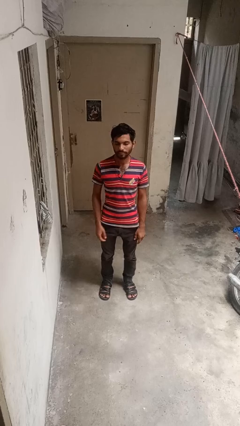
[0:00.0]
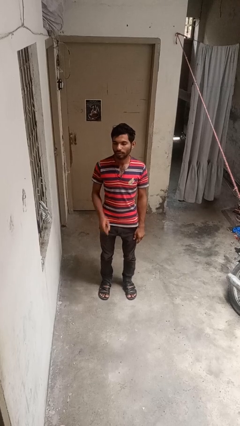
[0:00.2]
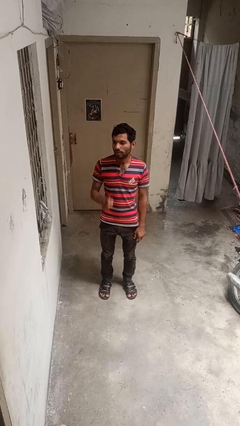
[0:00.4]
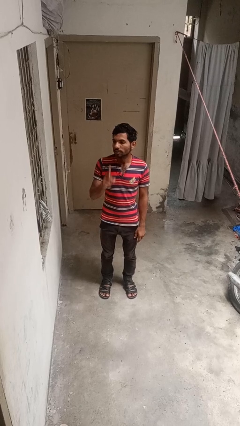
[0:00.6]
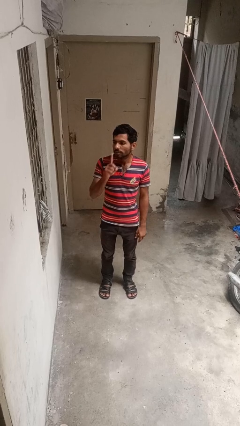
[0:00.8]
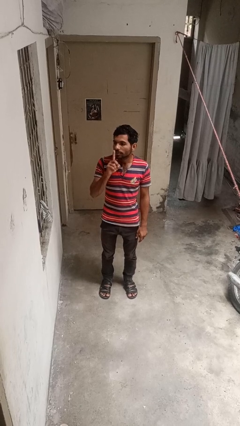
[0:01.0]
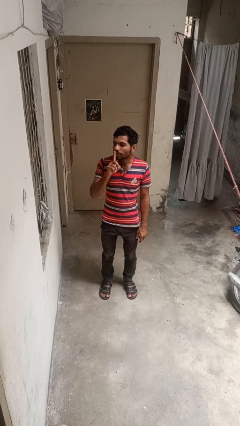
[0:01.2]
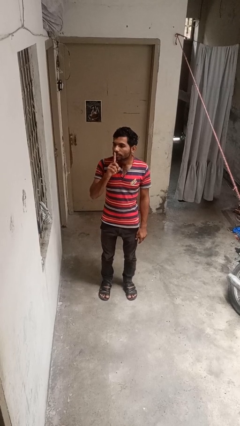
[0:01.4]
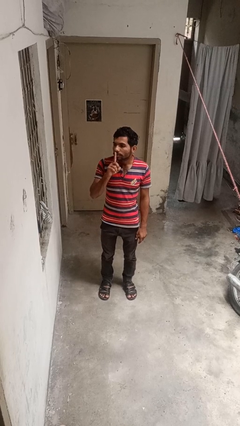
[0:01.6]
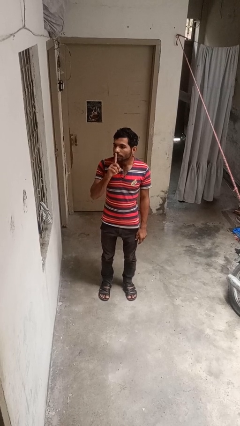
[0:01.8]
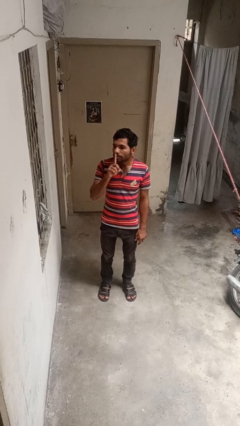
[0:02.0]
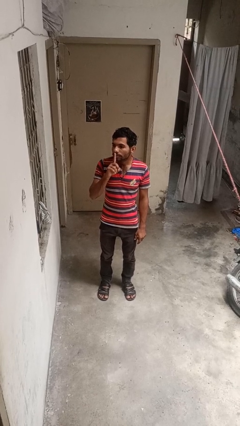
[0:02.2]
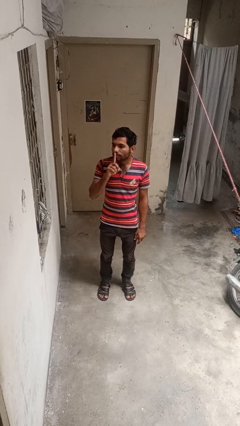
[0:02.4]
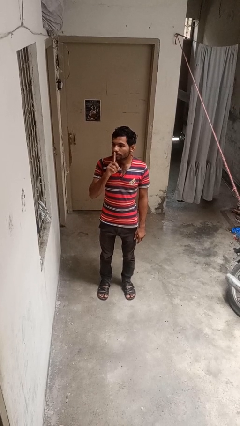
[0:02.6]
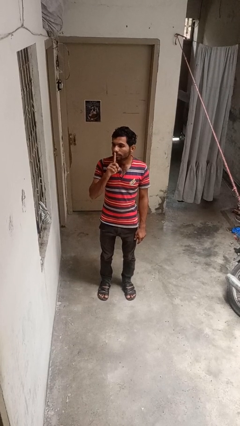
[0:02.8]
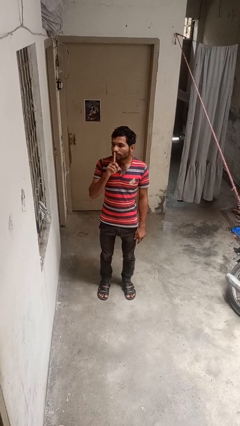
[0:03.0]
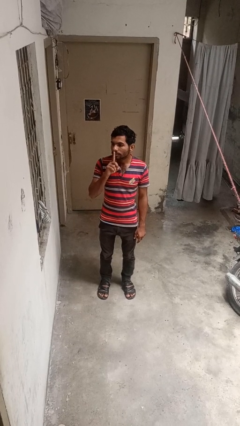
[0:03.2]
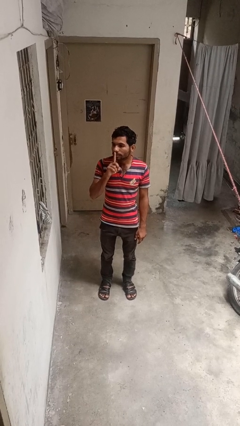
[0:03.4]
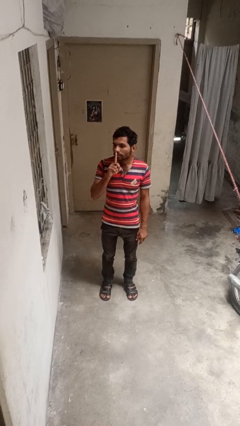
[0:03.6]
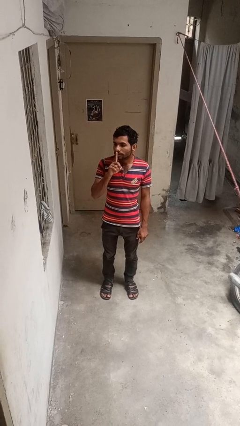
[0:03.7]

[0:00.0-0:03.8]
person gestures be quiet

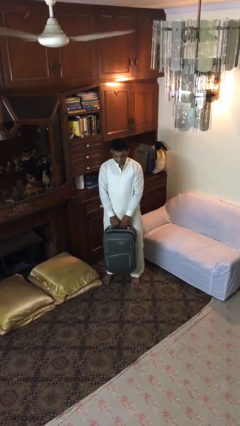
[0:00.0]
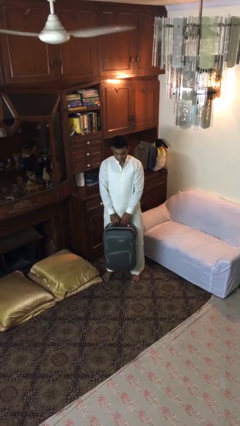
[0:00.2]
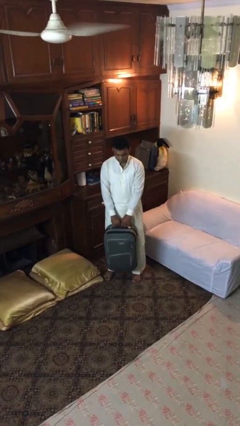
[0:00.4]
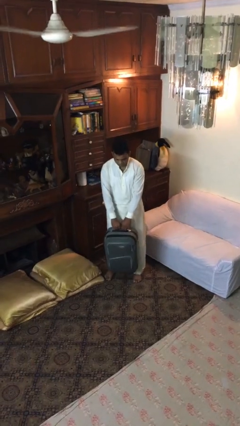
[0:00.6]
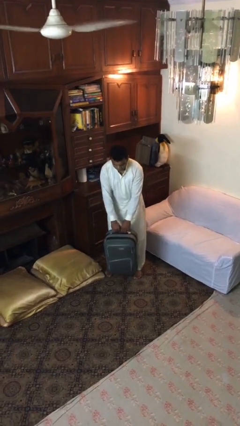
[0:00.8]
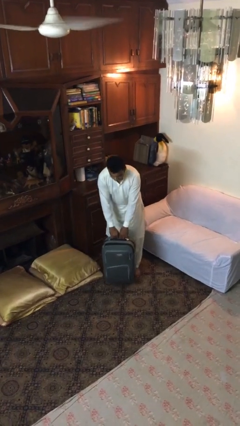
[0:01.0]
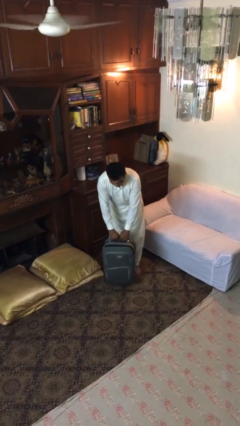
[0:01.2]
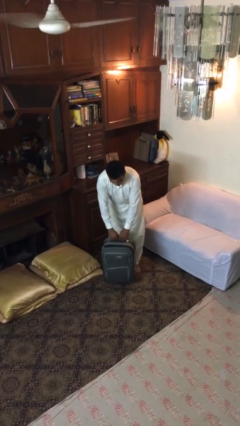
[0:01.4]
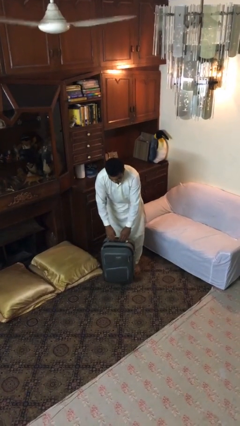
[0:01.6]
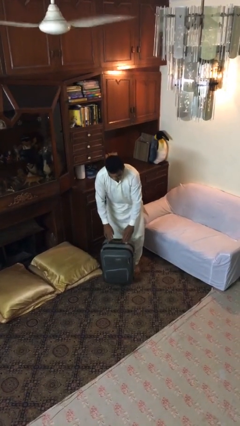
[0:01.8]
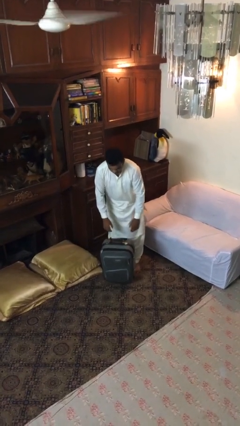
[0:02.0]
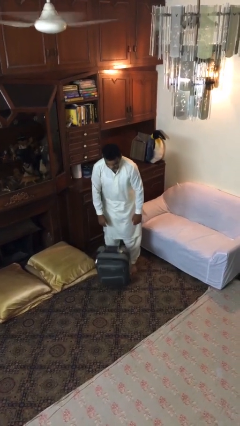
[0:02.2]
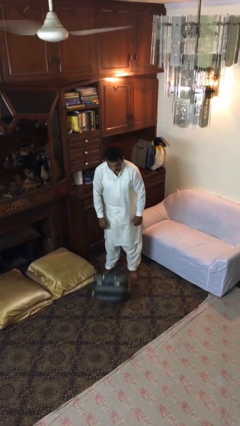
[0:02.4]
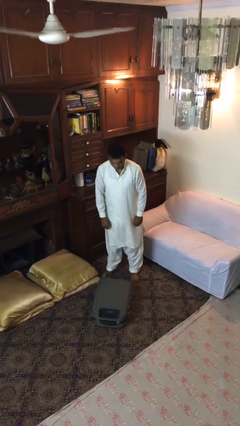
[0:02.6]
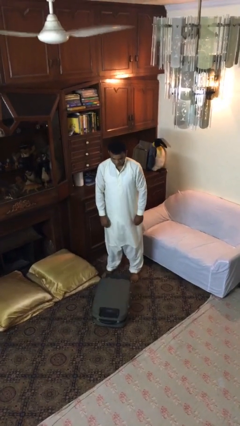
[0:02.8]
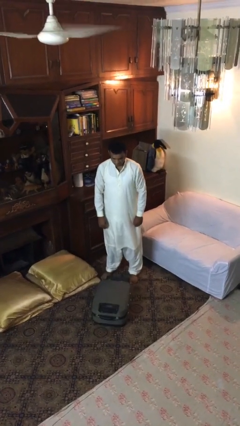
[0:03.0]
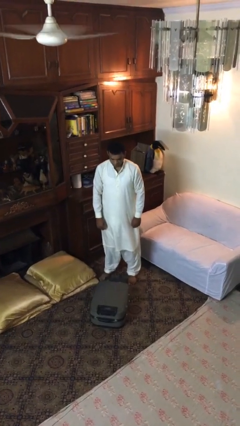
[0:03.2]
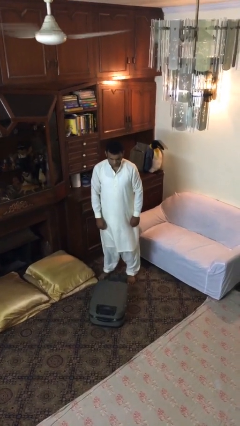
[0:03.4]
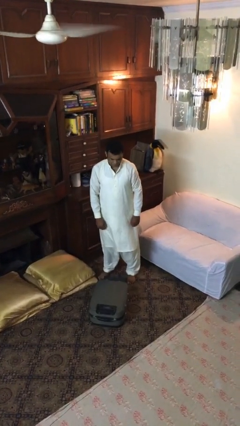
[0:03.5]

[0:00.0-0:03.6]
person puts down object on floor

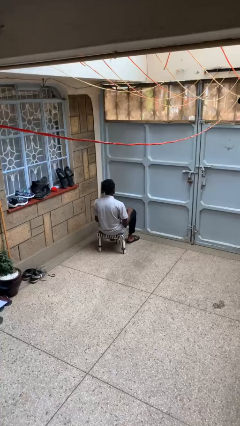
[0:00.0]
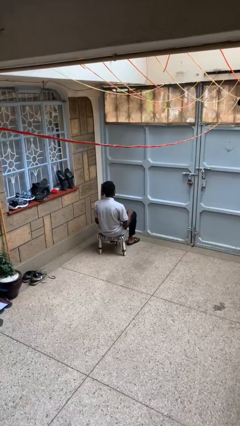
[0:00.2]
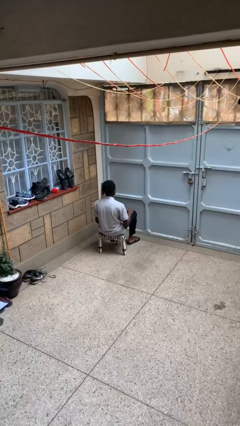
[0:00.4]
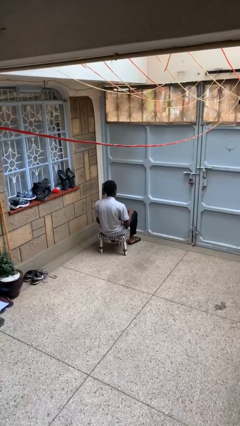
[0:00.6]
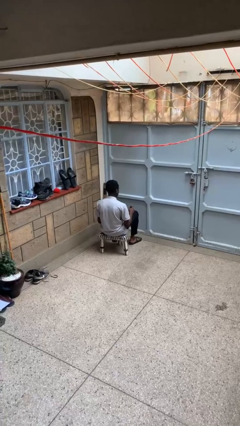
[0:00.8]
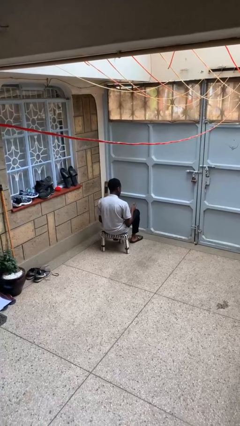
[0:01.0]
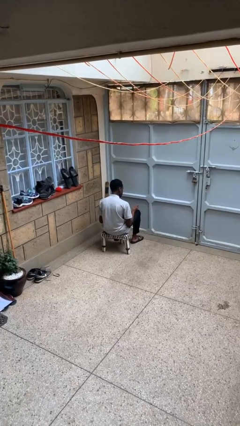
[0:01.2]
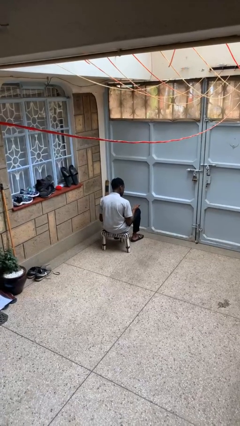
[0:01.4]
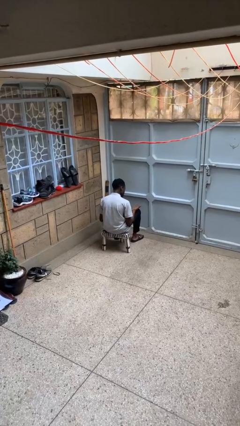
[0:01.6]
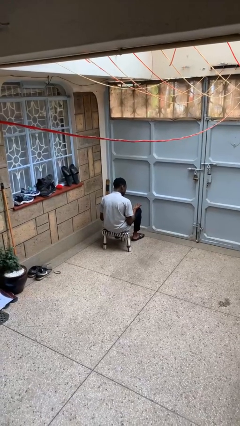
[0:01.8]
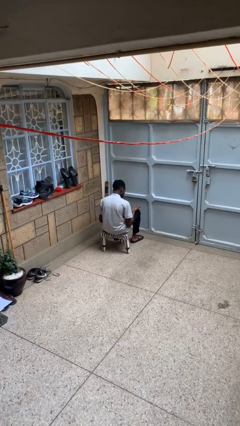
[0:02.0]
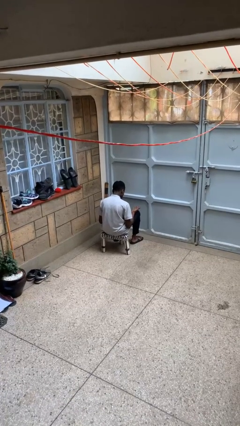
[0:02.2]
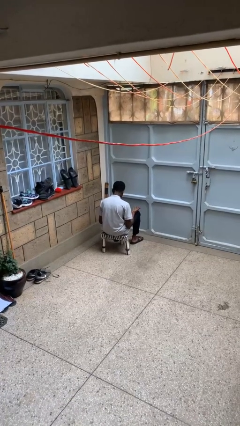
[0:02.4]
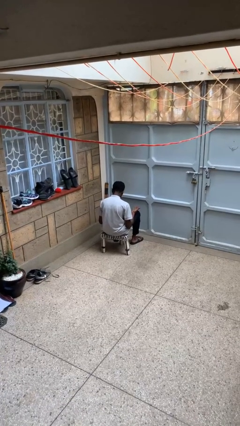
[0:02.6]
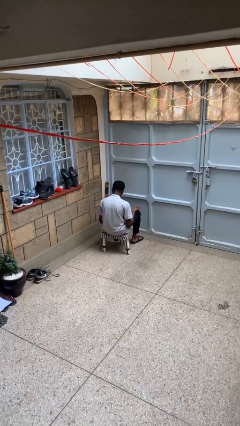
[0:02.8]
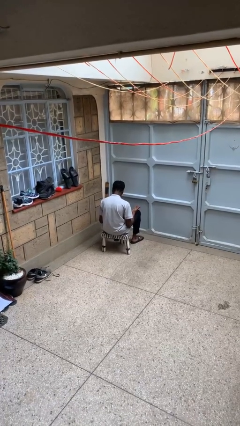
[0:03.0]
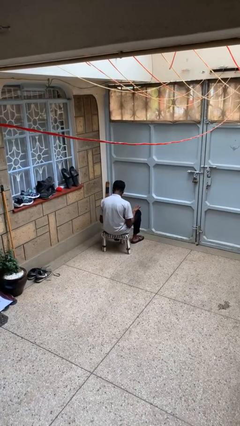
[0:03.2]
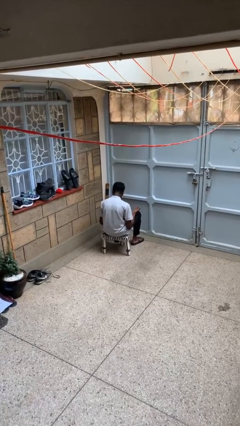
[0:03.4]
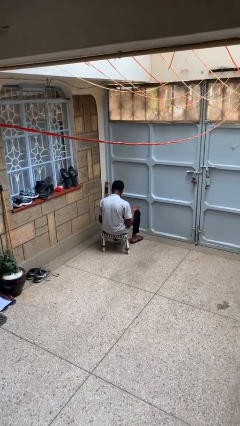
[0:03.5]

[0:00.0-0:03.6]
person looks at hands in lap

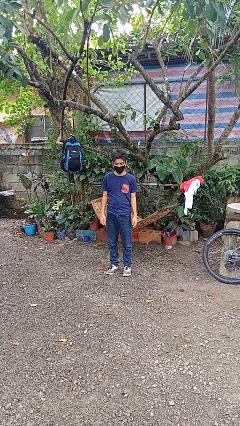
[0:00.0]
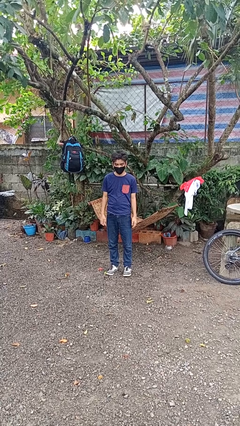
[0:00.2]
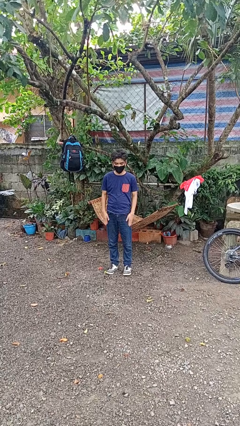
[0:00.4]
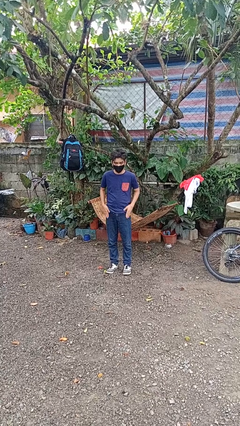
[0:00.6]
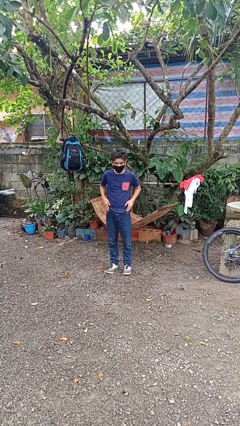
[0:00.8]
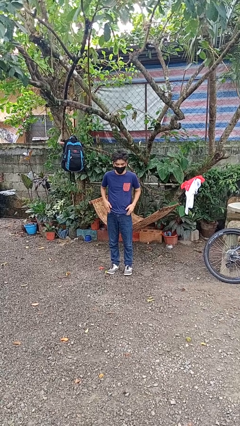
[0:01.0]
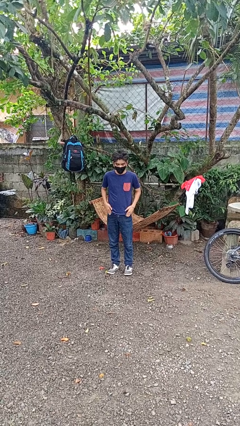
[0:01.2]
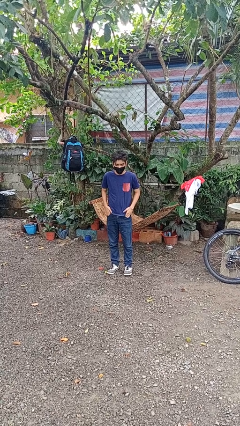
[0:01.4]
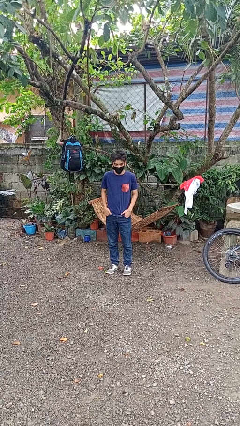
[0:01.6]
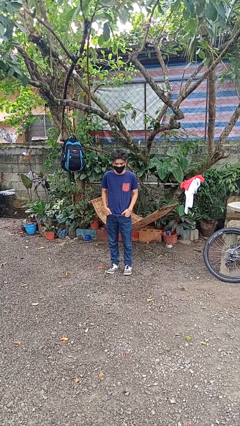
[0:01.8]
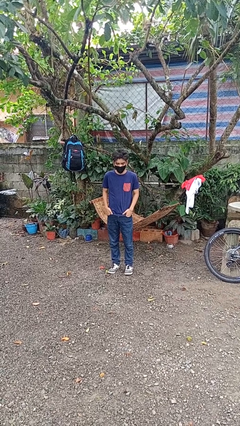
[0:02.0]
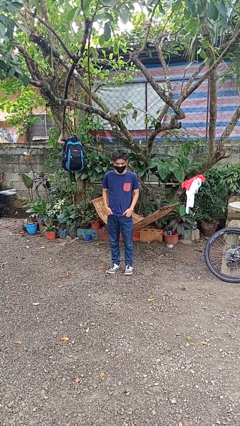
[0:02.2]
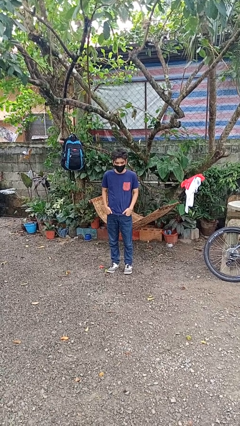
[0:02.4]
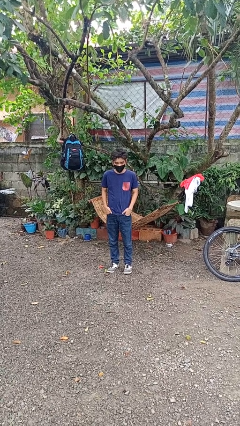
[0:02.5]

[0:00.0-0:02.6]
person puts hands in back pockets

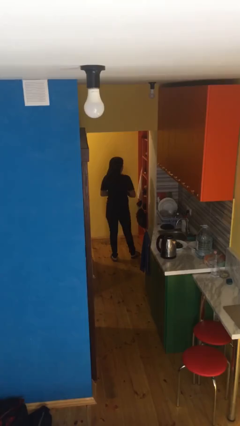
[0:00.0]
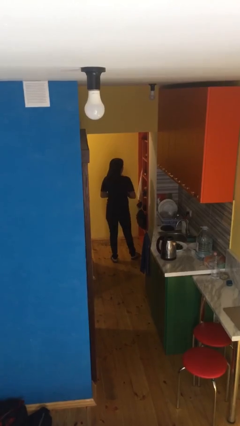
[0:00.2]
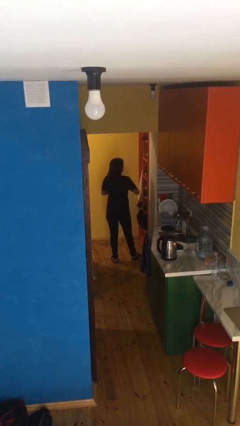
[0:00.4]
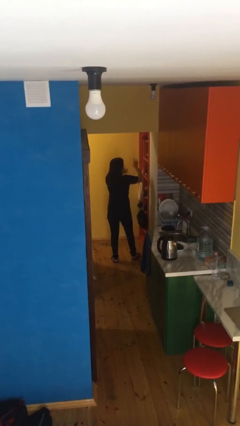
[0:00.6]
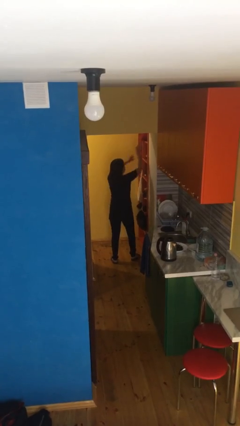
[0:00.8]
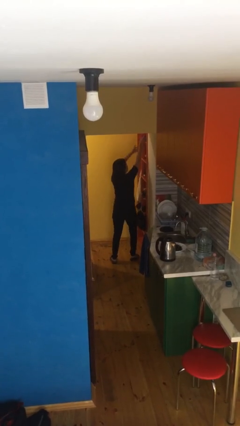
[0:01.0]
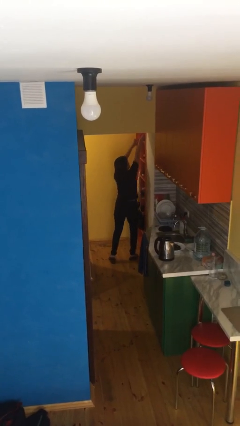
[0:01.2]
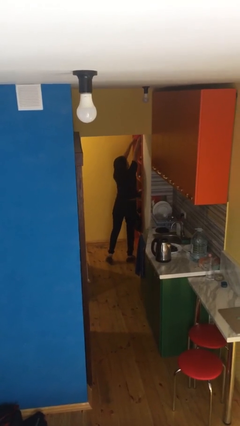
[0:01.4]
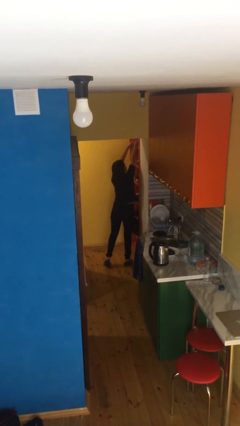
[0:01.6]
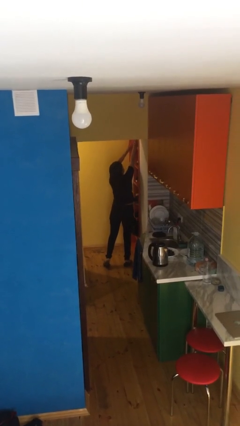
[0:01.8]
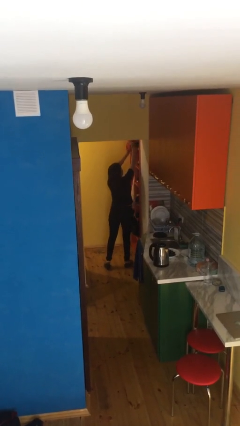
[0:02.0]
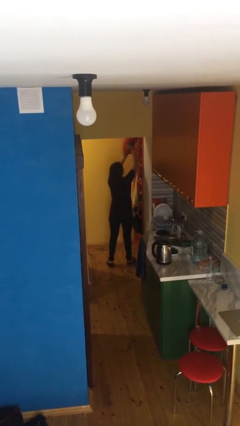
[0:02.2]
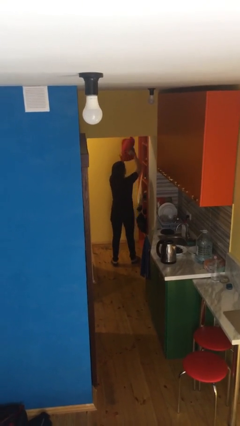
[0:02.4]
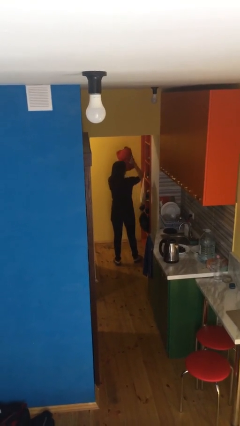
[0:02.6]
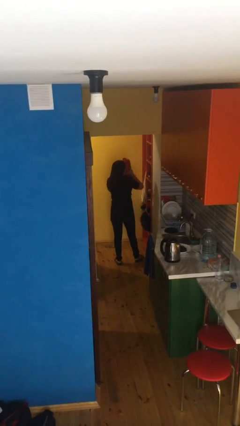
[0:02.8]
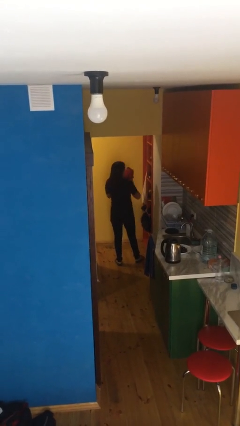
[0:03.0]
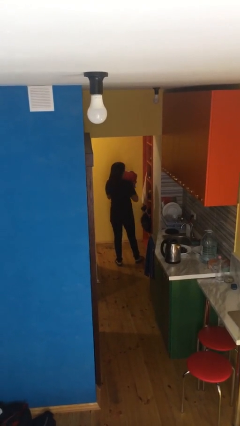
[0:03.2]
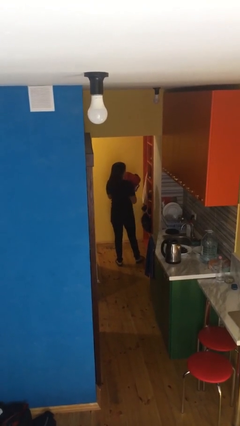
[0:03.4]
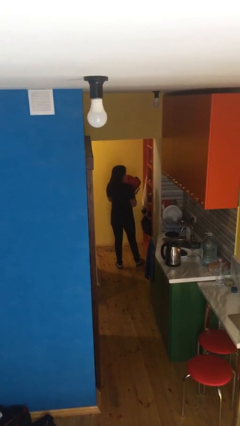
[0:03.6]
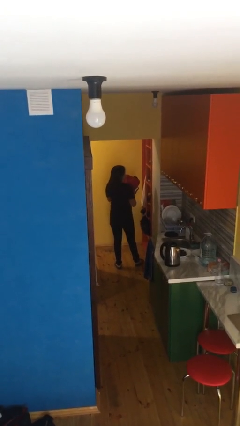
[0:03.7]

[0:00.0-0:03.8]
person picks up object from shelf
